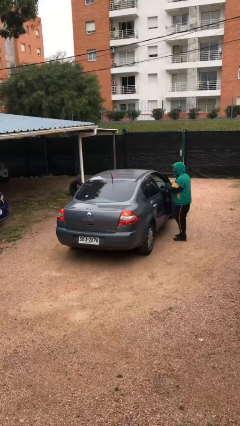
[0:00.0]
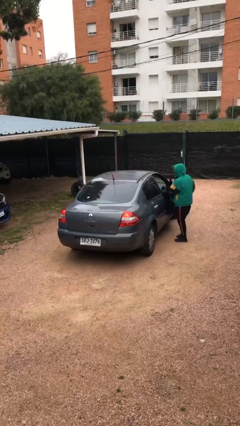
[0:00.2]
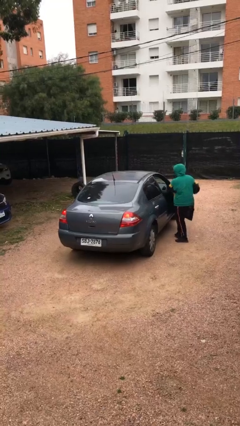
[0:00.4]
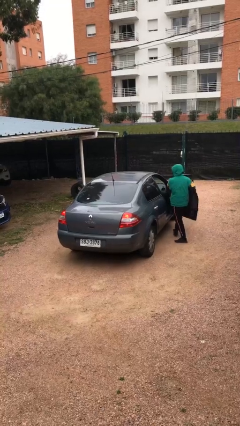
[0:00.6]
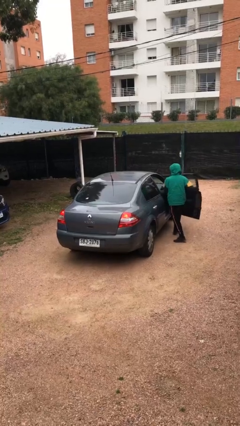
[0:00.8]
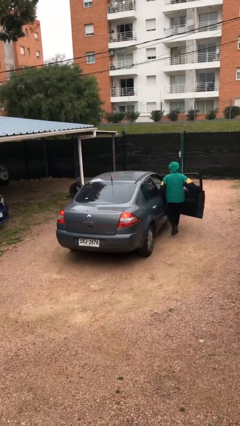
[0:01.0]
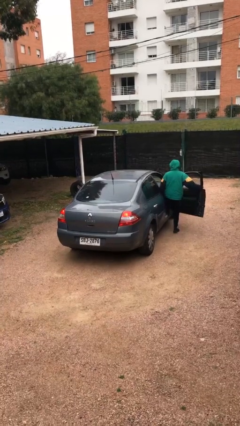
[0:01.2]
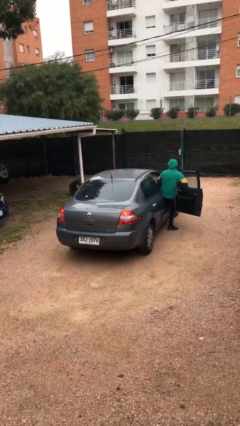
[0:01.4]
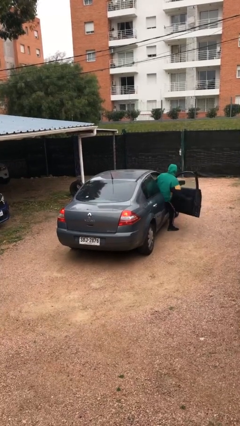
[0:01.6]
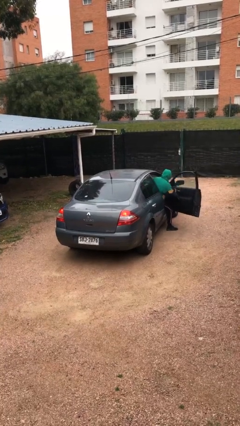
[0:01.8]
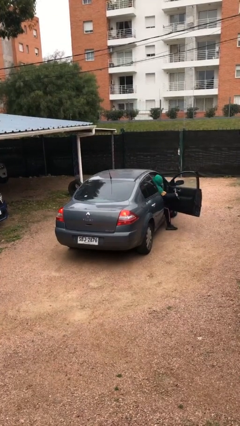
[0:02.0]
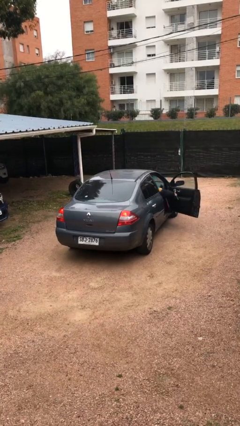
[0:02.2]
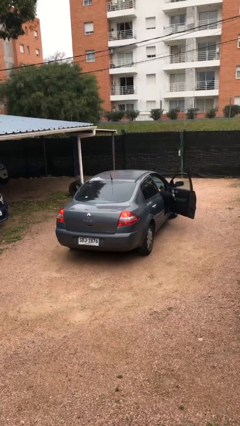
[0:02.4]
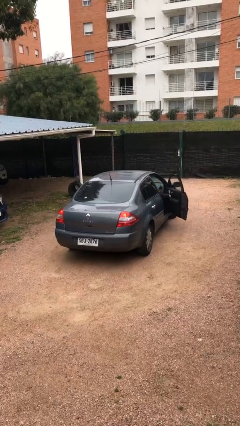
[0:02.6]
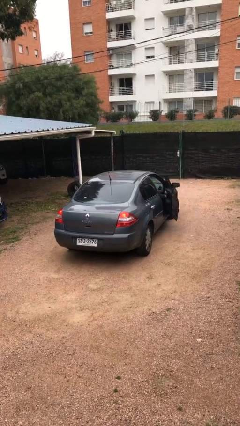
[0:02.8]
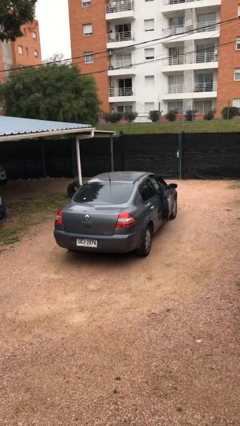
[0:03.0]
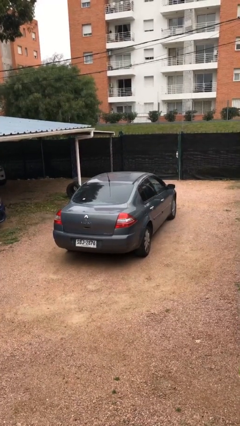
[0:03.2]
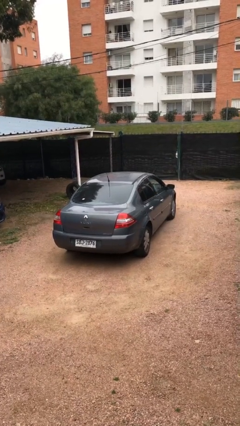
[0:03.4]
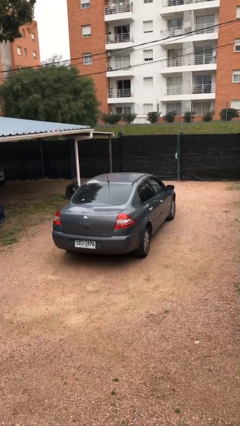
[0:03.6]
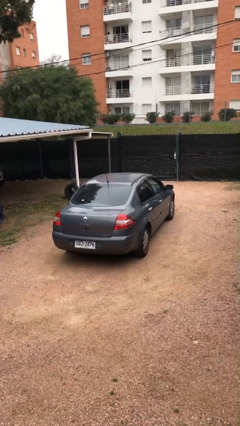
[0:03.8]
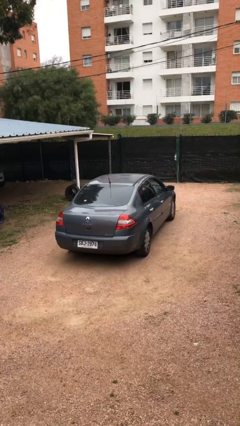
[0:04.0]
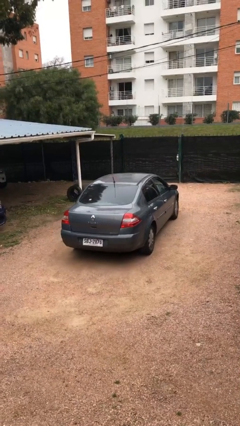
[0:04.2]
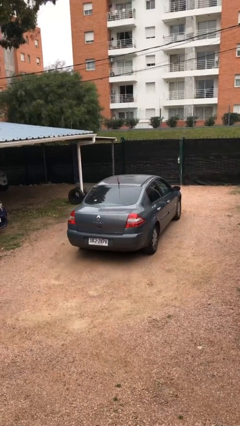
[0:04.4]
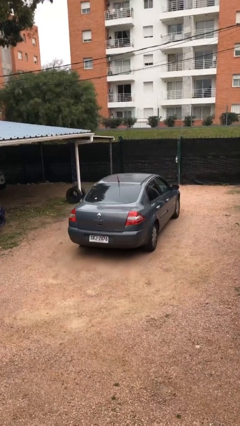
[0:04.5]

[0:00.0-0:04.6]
car picks up person

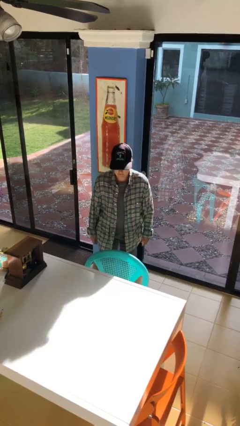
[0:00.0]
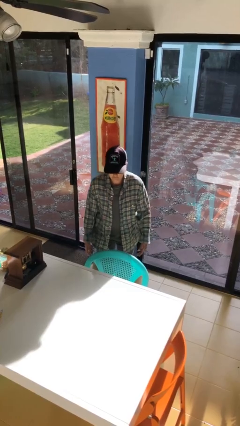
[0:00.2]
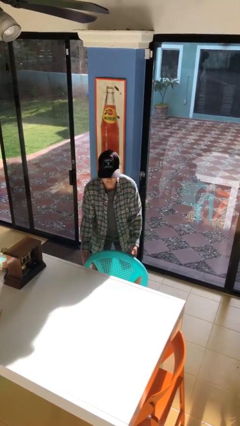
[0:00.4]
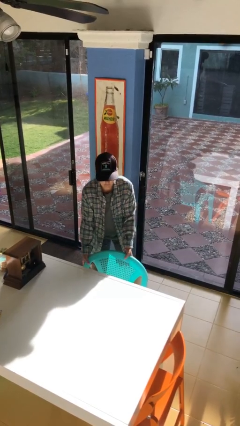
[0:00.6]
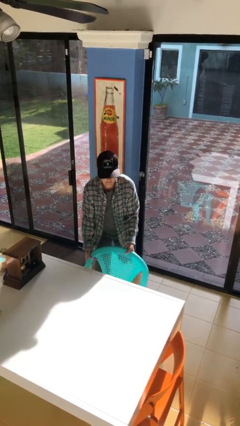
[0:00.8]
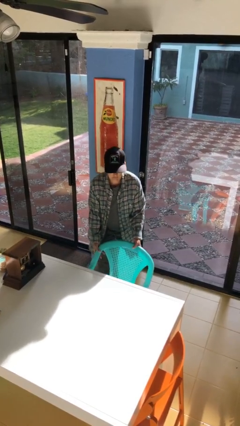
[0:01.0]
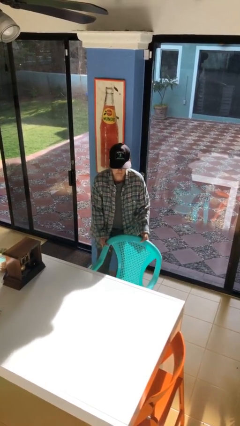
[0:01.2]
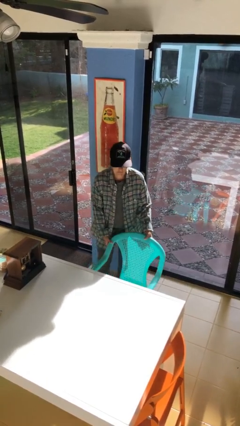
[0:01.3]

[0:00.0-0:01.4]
person pulls out chair

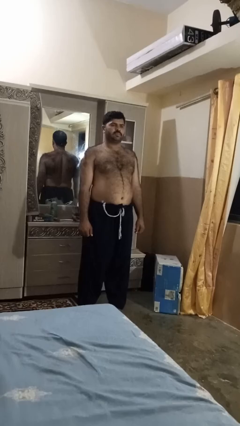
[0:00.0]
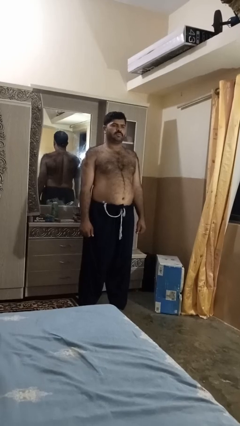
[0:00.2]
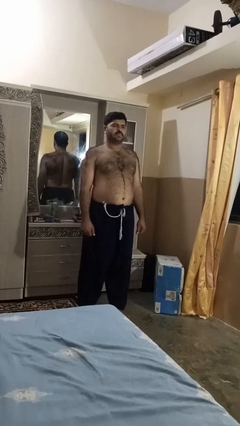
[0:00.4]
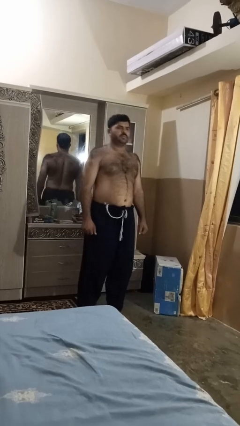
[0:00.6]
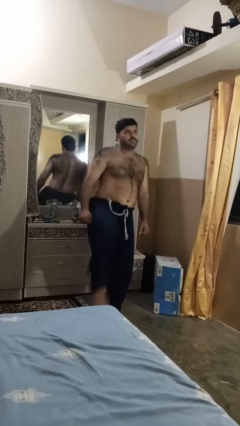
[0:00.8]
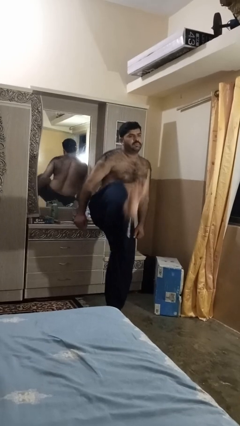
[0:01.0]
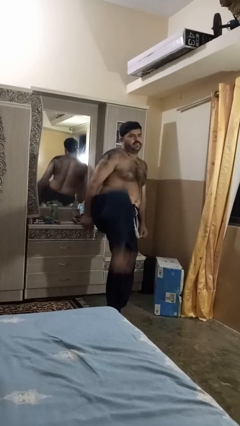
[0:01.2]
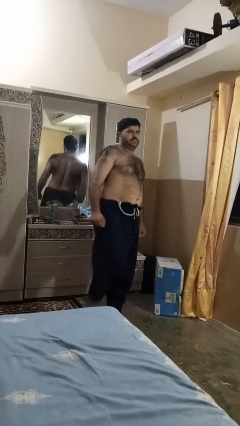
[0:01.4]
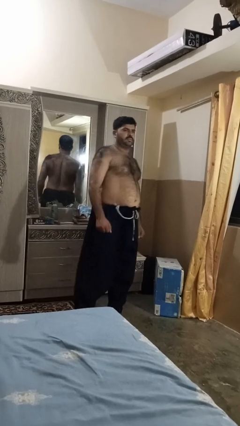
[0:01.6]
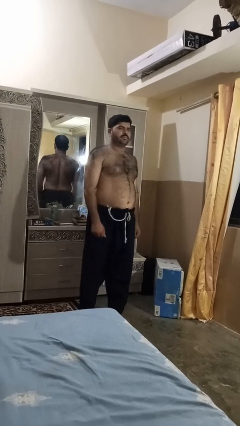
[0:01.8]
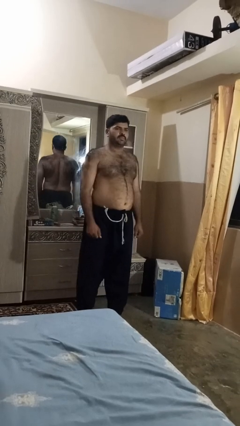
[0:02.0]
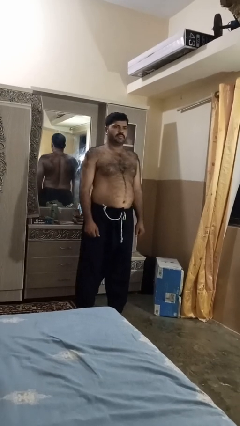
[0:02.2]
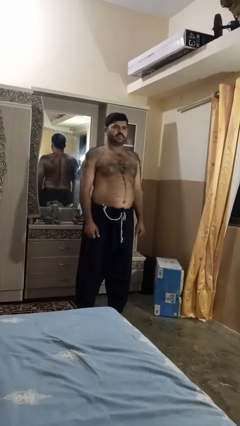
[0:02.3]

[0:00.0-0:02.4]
person karate kicks

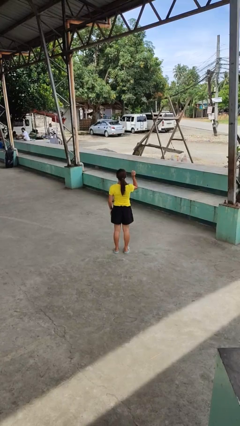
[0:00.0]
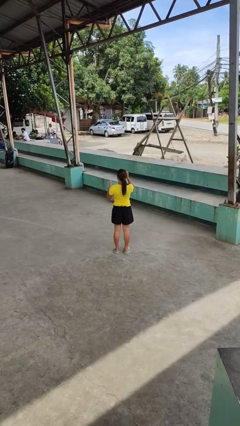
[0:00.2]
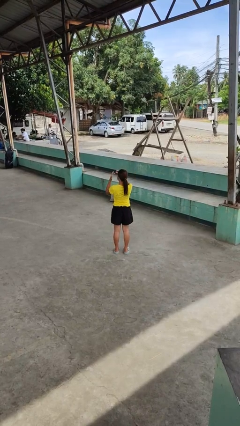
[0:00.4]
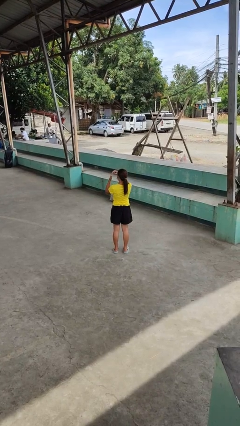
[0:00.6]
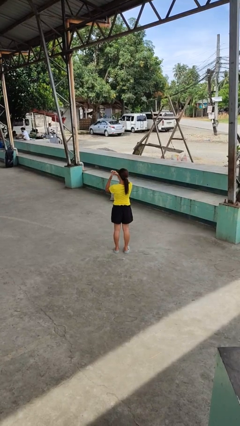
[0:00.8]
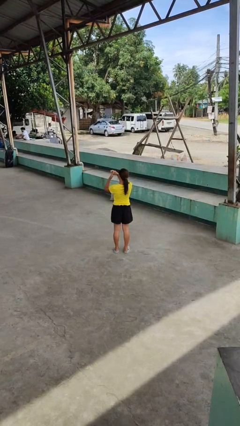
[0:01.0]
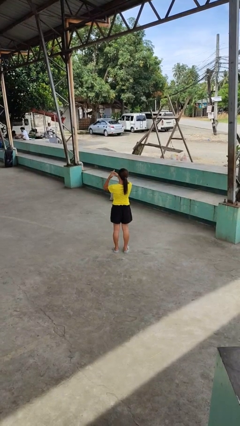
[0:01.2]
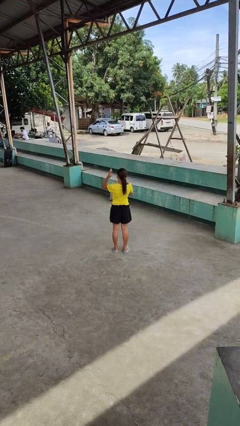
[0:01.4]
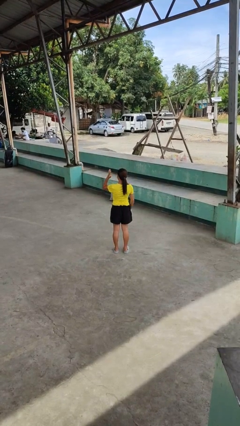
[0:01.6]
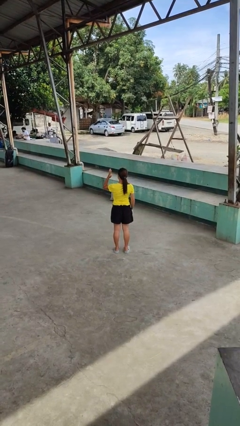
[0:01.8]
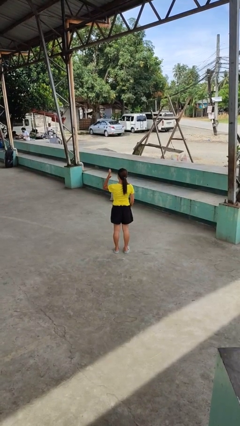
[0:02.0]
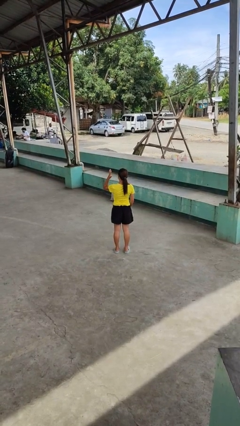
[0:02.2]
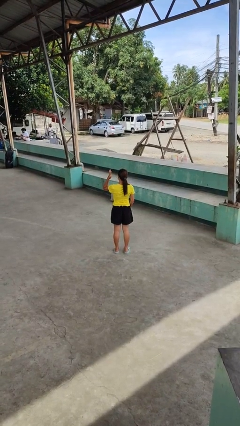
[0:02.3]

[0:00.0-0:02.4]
person puts on ring

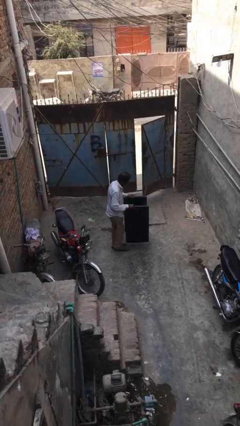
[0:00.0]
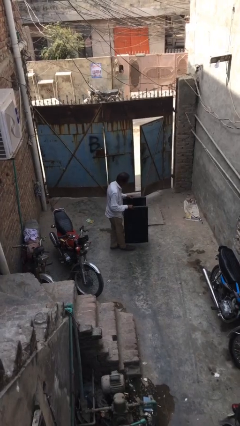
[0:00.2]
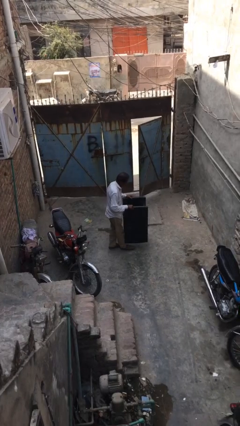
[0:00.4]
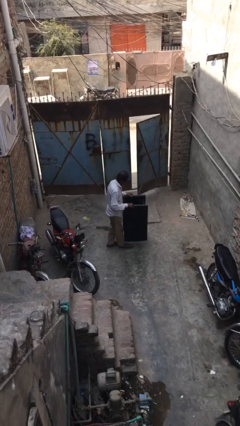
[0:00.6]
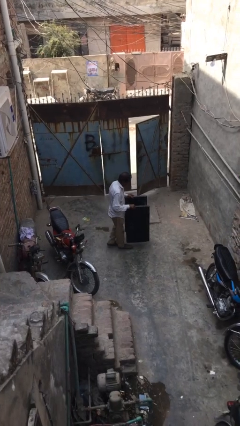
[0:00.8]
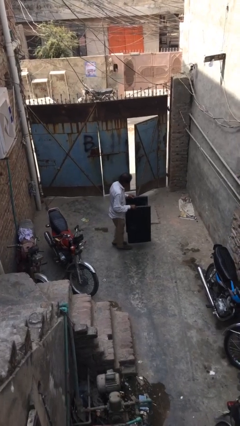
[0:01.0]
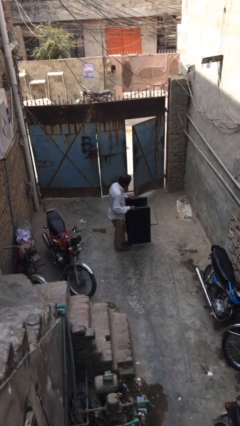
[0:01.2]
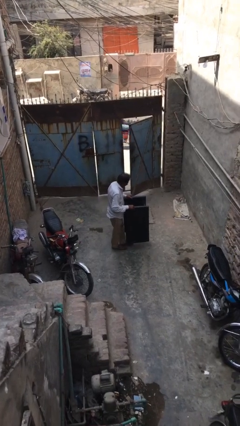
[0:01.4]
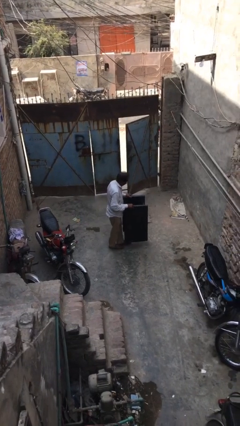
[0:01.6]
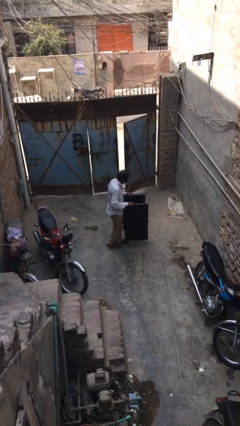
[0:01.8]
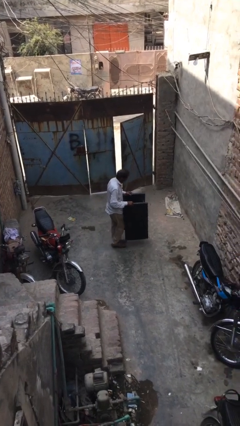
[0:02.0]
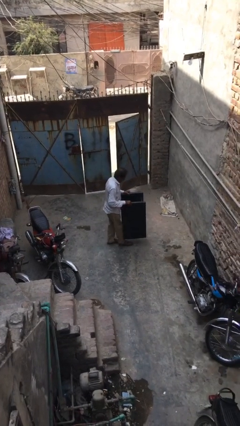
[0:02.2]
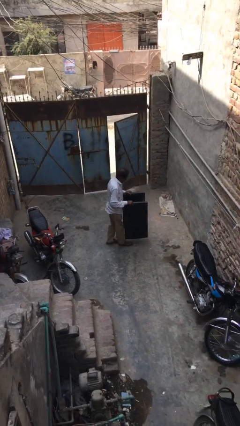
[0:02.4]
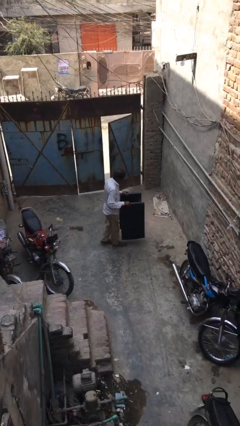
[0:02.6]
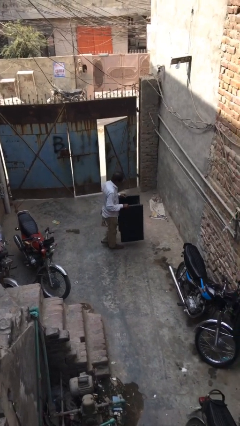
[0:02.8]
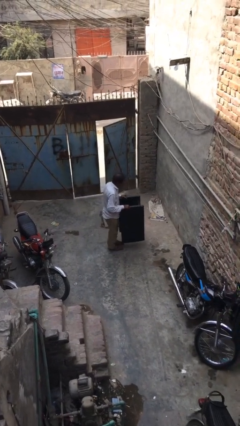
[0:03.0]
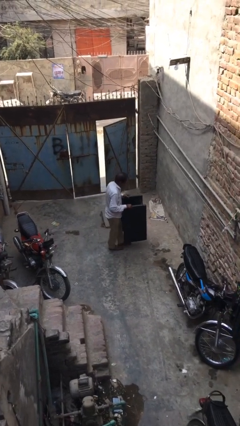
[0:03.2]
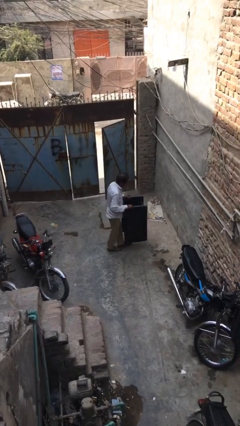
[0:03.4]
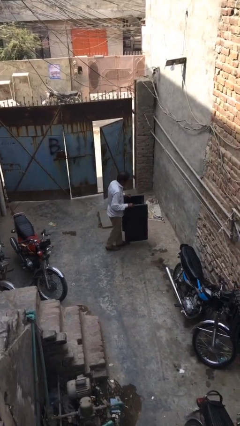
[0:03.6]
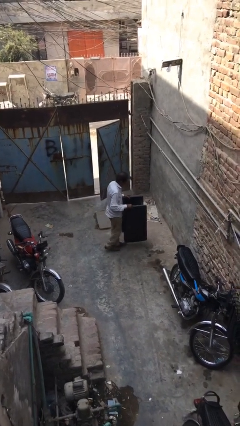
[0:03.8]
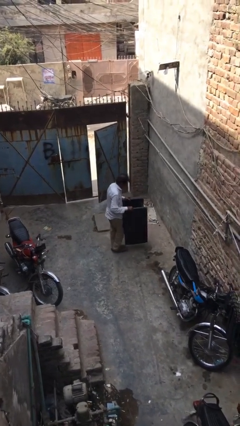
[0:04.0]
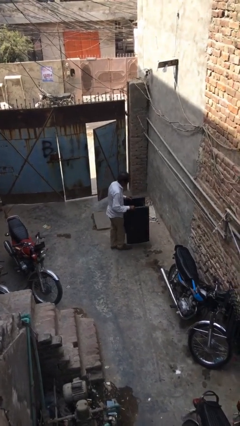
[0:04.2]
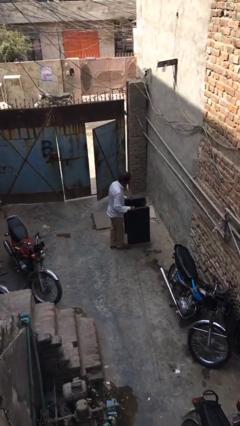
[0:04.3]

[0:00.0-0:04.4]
person carries heavy object

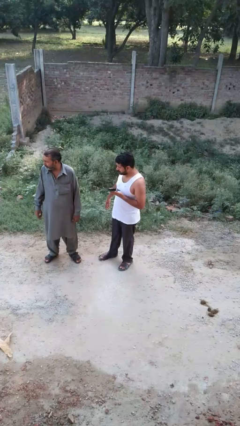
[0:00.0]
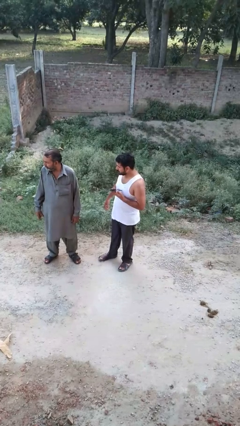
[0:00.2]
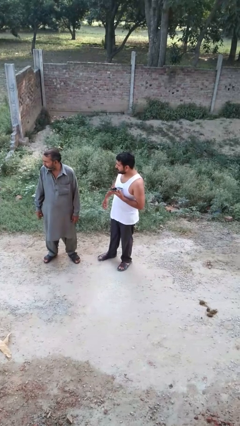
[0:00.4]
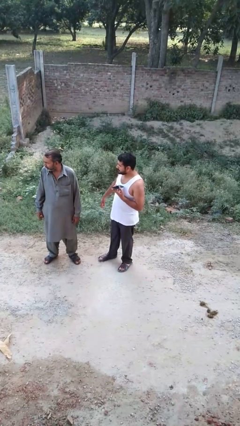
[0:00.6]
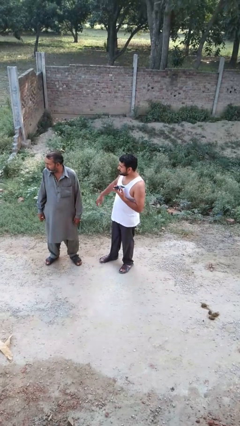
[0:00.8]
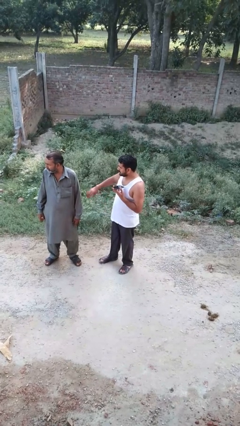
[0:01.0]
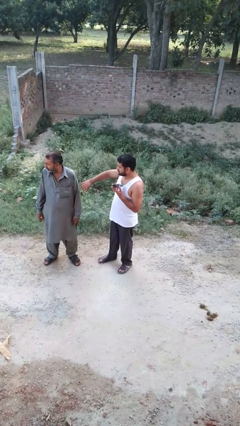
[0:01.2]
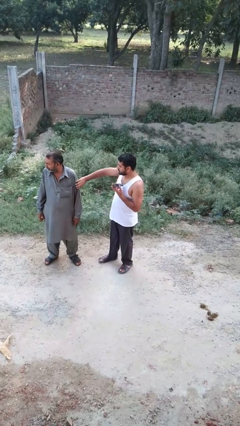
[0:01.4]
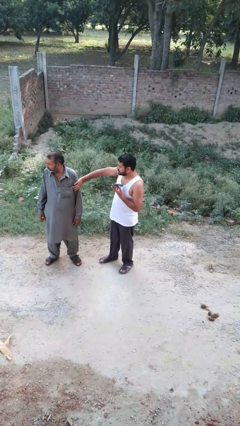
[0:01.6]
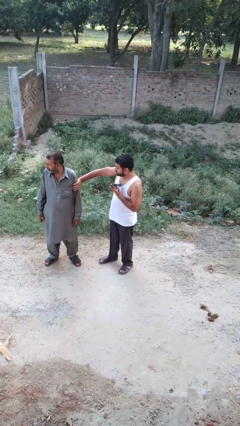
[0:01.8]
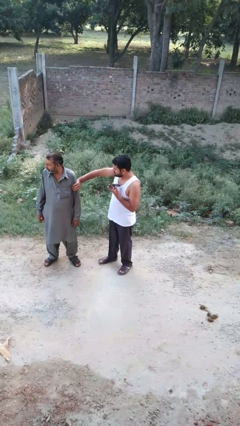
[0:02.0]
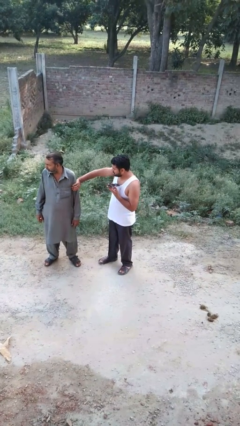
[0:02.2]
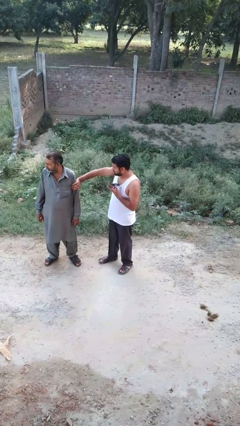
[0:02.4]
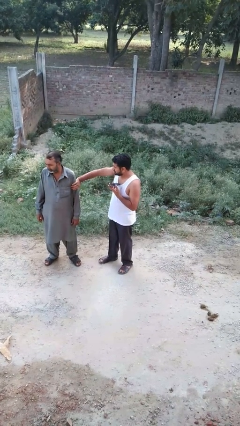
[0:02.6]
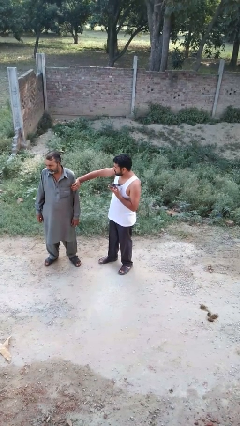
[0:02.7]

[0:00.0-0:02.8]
person grabs person by bicep
